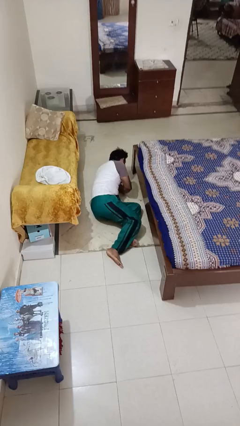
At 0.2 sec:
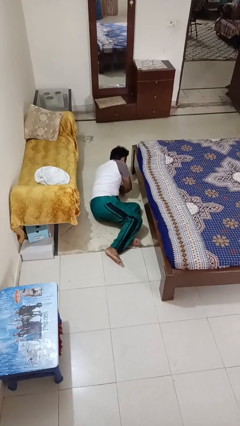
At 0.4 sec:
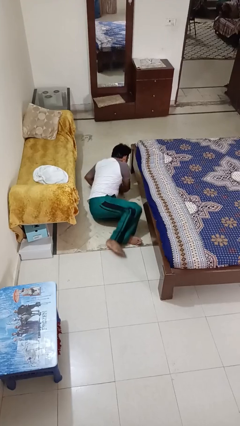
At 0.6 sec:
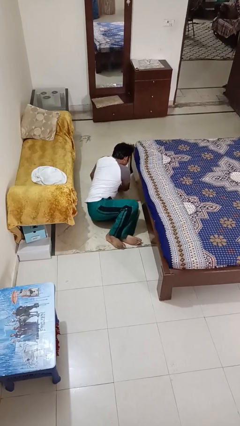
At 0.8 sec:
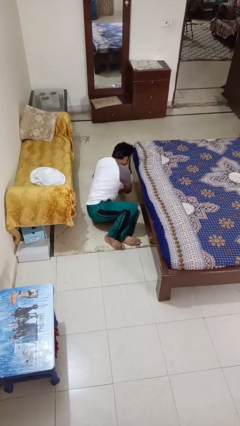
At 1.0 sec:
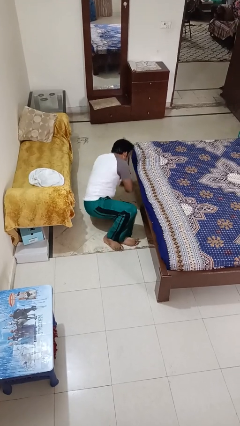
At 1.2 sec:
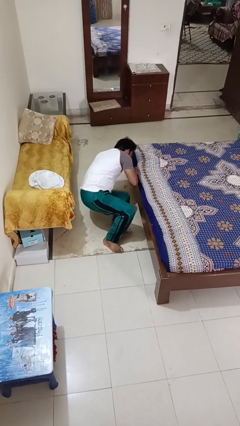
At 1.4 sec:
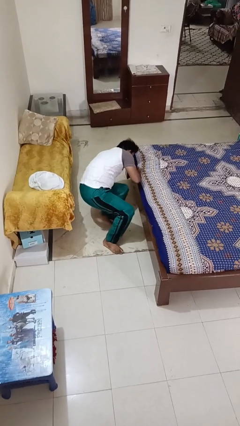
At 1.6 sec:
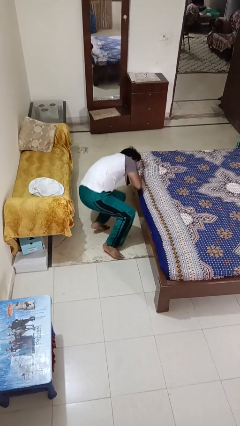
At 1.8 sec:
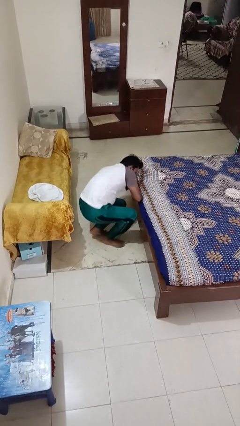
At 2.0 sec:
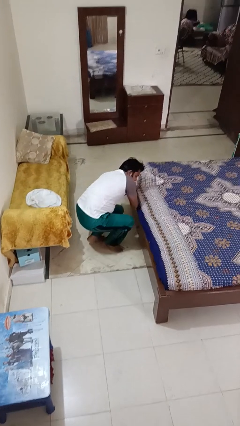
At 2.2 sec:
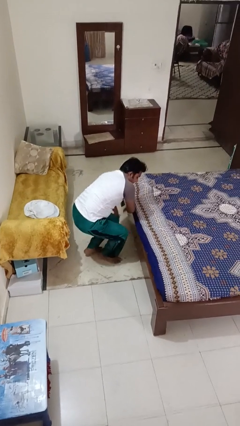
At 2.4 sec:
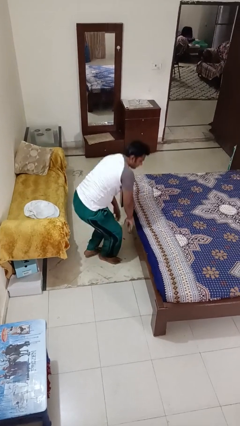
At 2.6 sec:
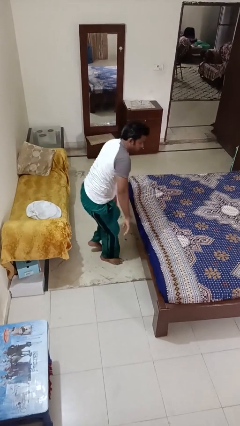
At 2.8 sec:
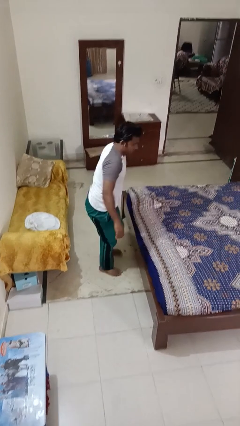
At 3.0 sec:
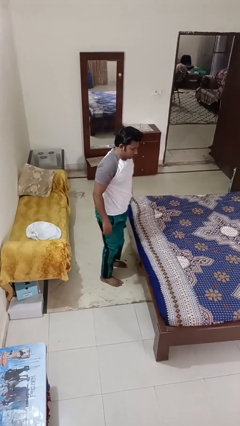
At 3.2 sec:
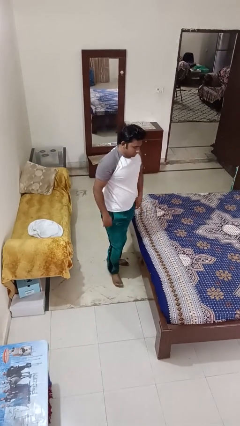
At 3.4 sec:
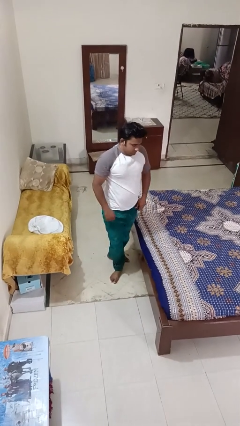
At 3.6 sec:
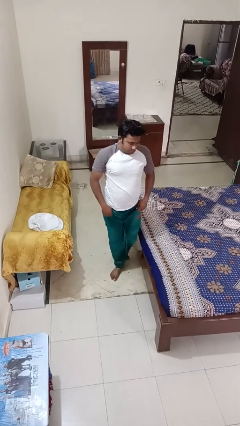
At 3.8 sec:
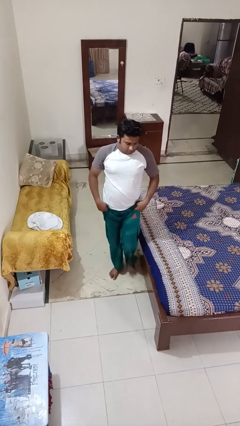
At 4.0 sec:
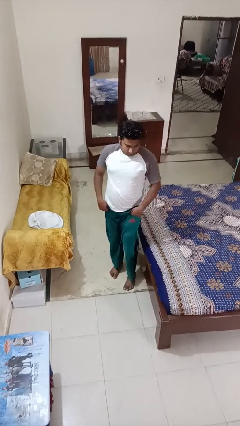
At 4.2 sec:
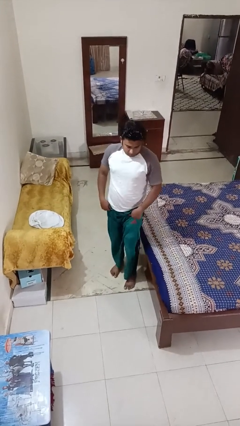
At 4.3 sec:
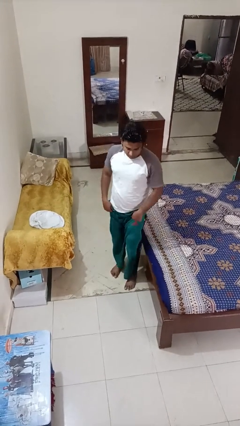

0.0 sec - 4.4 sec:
person stands up from floor

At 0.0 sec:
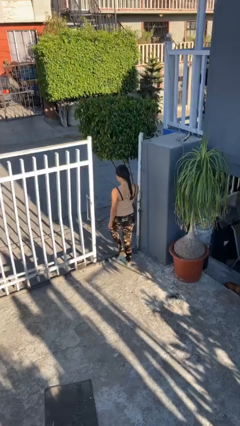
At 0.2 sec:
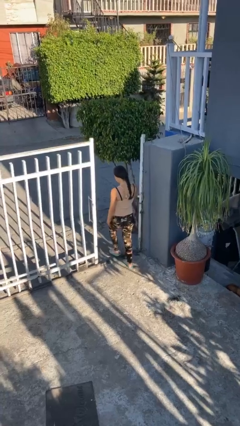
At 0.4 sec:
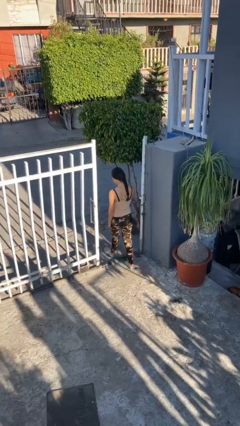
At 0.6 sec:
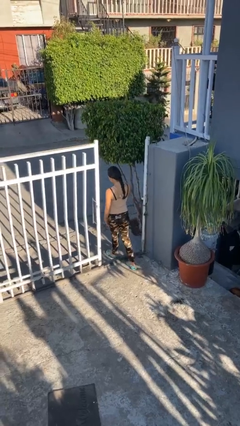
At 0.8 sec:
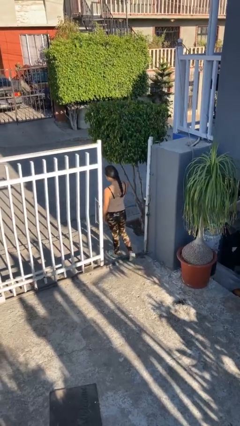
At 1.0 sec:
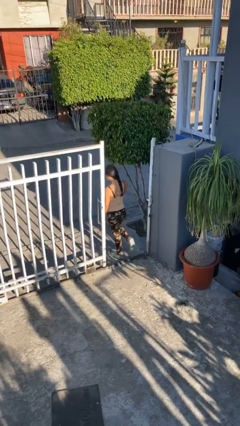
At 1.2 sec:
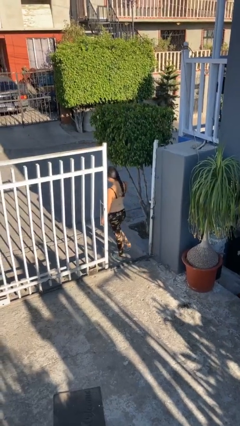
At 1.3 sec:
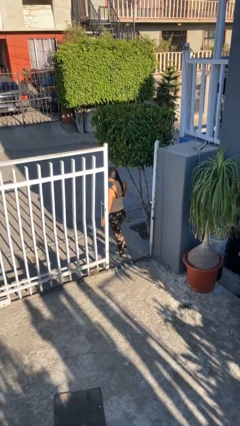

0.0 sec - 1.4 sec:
person exits scene through structure

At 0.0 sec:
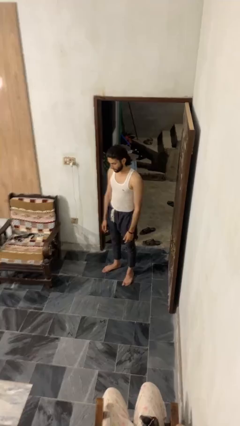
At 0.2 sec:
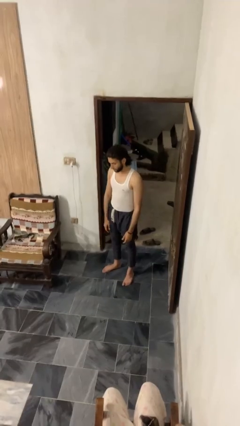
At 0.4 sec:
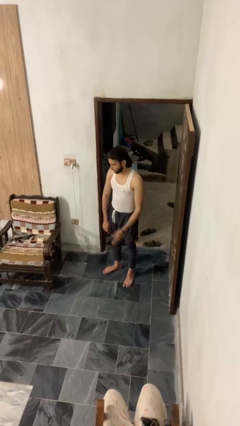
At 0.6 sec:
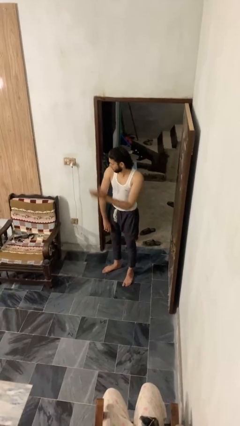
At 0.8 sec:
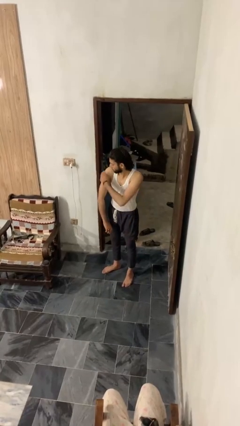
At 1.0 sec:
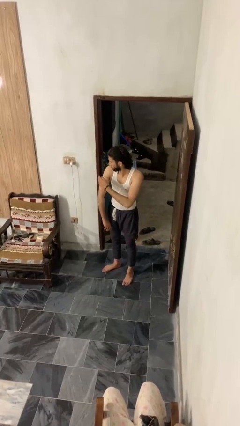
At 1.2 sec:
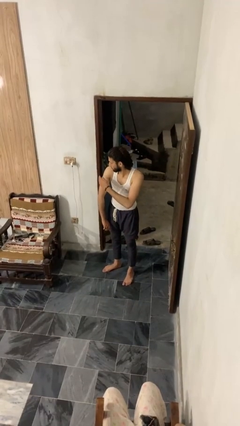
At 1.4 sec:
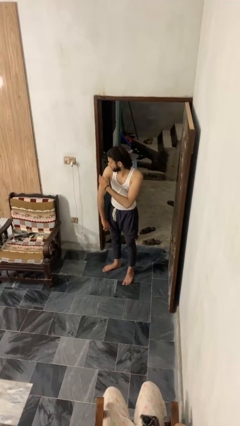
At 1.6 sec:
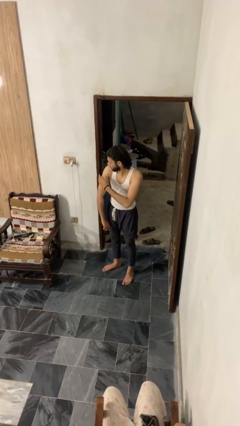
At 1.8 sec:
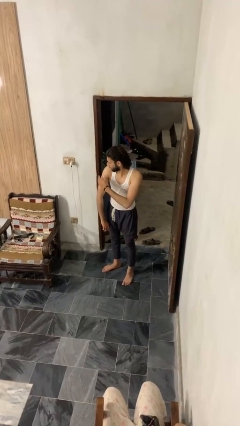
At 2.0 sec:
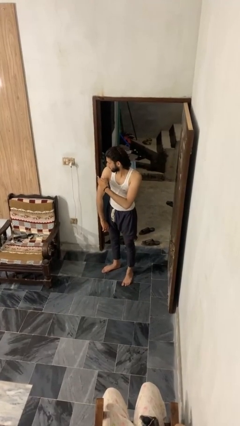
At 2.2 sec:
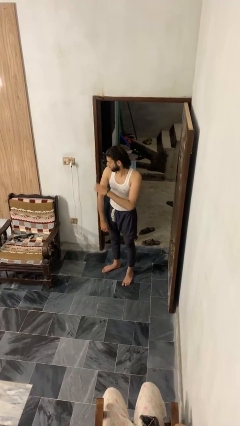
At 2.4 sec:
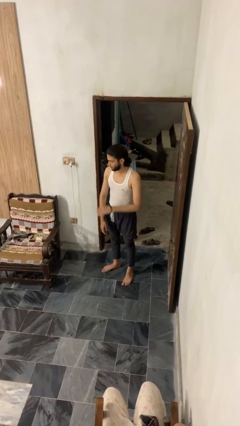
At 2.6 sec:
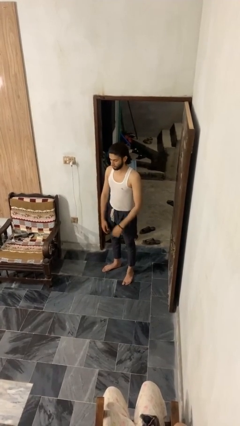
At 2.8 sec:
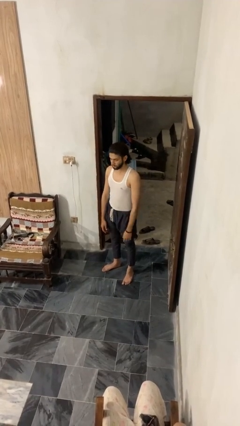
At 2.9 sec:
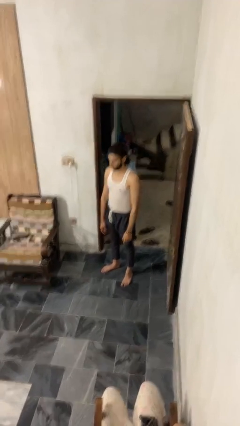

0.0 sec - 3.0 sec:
person swats bug

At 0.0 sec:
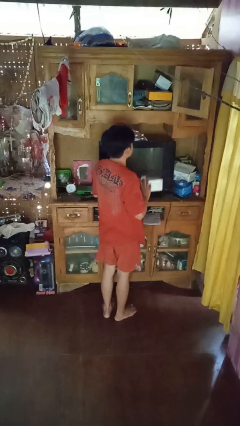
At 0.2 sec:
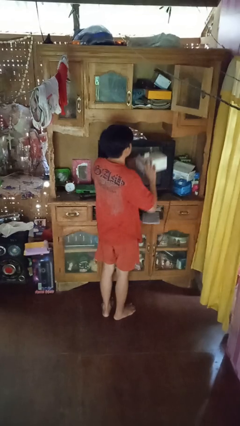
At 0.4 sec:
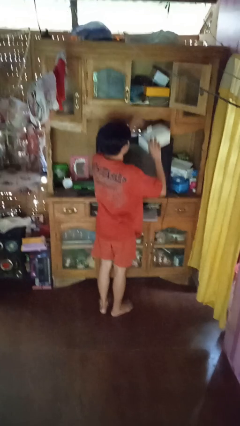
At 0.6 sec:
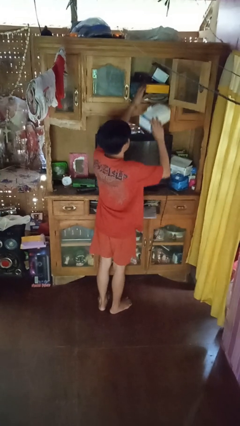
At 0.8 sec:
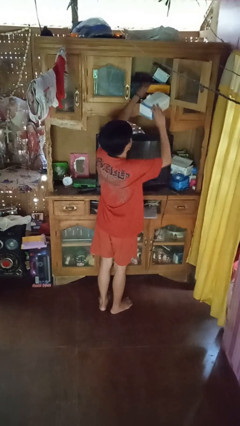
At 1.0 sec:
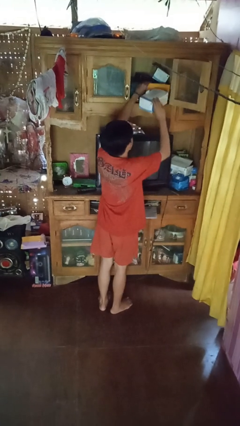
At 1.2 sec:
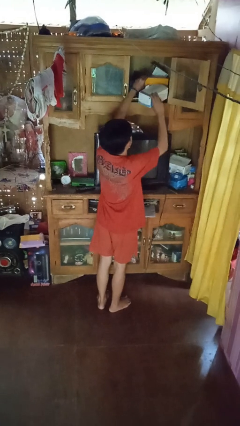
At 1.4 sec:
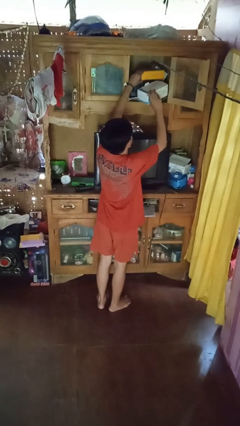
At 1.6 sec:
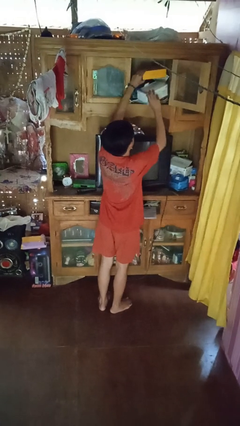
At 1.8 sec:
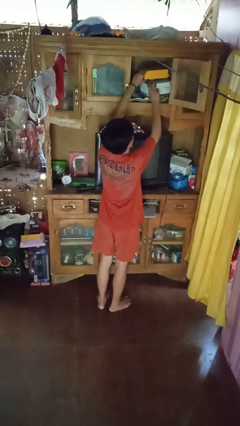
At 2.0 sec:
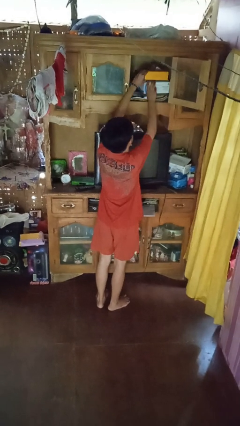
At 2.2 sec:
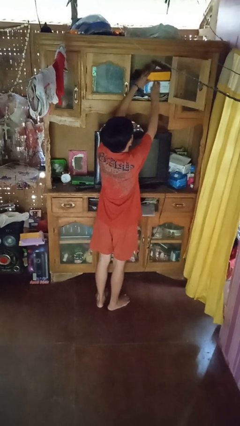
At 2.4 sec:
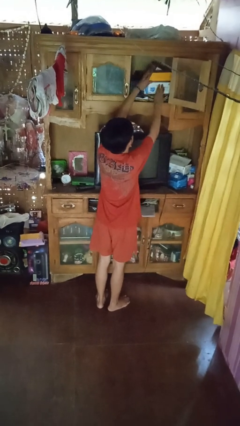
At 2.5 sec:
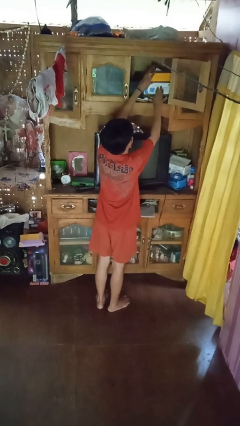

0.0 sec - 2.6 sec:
person puts down object on shelf

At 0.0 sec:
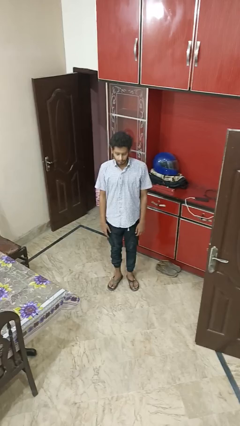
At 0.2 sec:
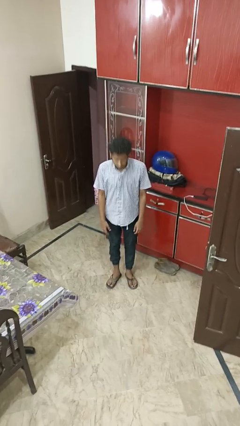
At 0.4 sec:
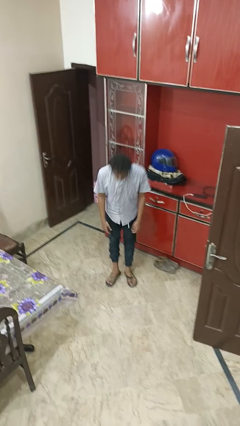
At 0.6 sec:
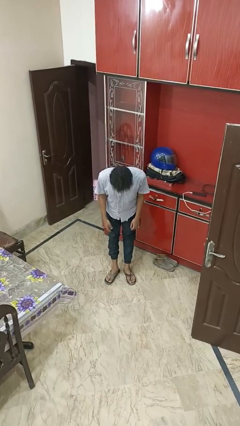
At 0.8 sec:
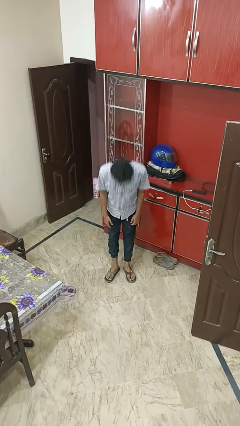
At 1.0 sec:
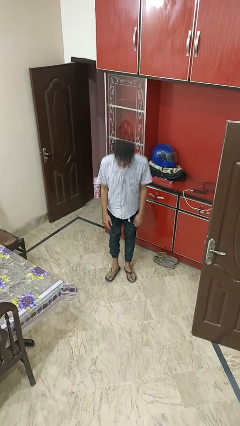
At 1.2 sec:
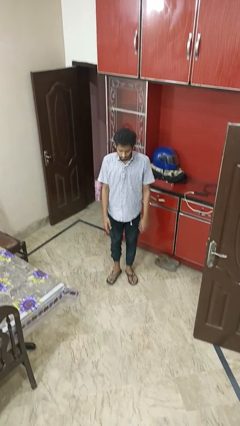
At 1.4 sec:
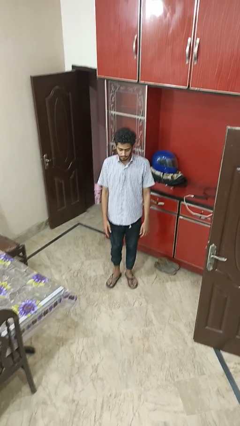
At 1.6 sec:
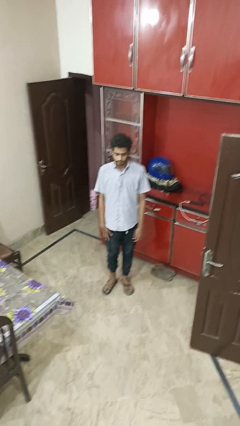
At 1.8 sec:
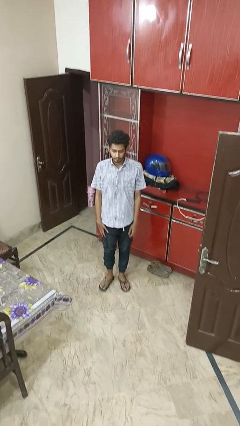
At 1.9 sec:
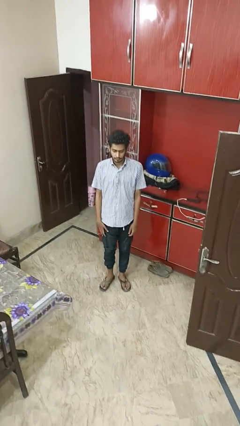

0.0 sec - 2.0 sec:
person bows

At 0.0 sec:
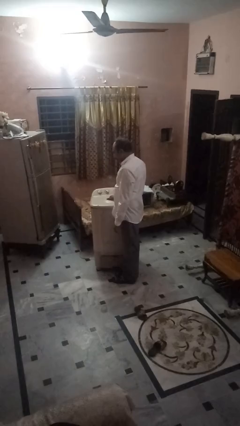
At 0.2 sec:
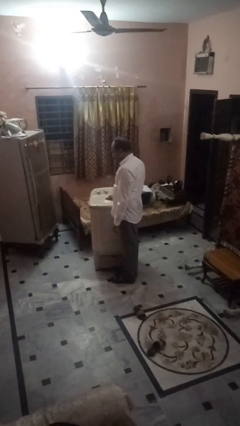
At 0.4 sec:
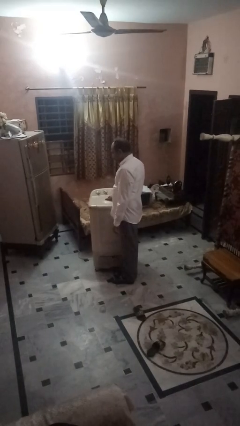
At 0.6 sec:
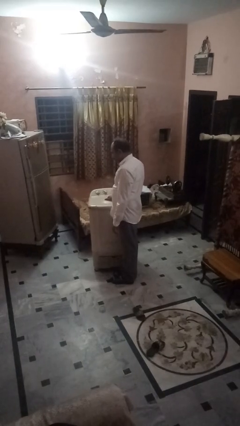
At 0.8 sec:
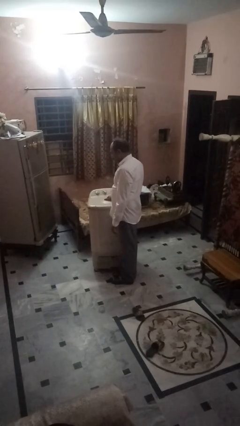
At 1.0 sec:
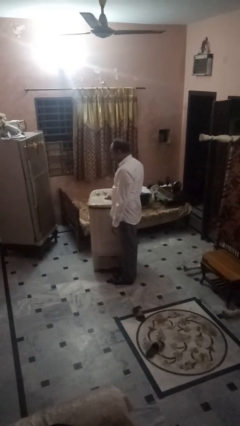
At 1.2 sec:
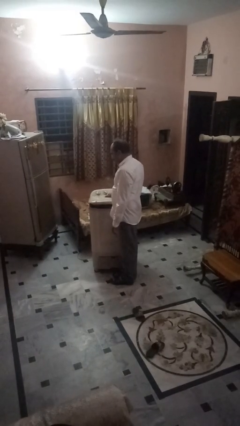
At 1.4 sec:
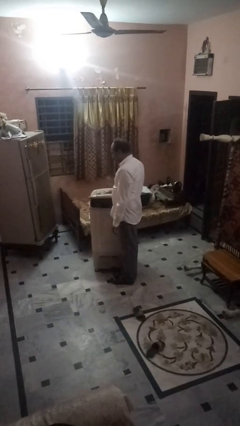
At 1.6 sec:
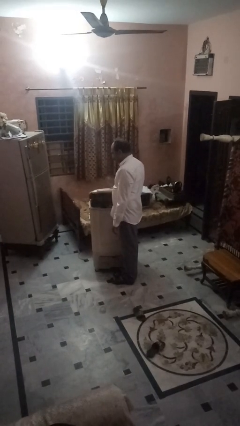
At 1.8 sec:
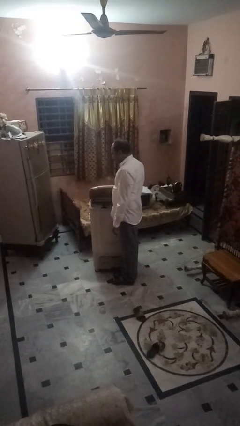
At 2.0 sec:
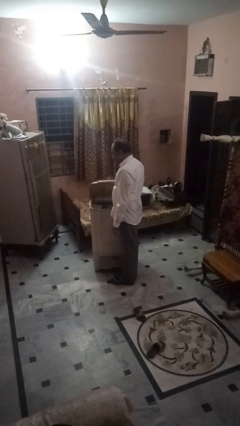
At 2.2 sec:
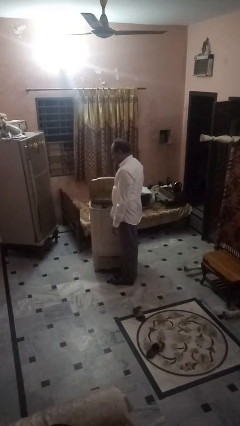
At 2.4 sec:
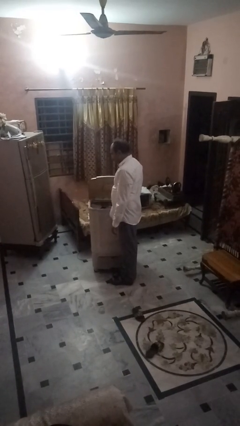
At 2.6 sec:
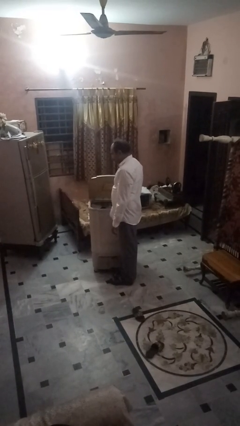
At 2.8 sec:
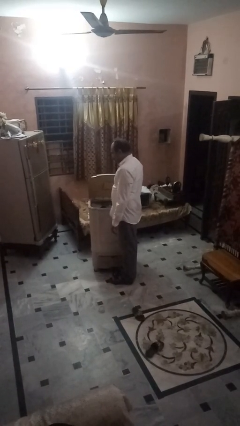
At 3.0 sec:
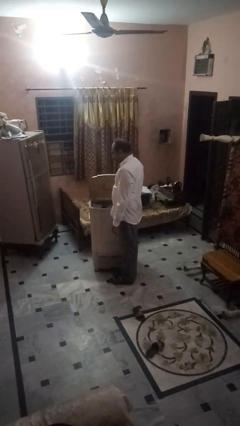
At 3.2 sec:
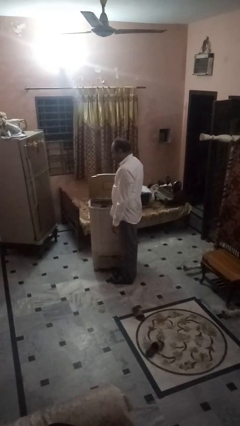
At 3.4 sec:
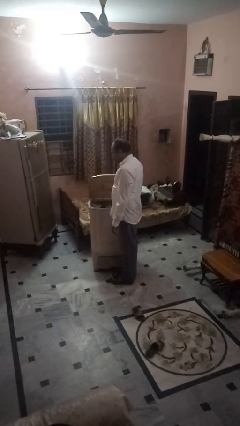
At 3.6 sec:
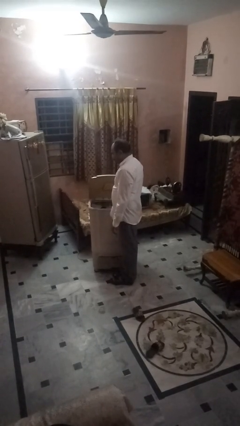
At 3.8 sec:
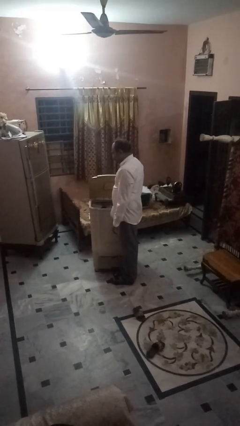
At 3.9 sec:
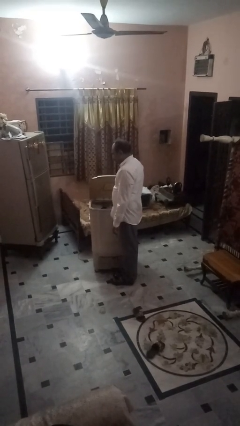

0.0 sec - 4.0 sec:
person opens clothes washer
